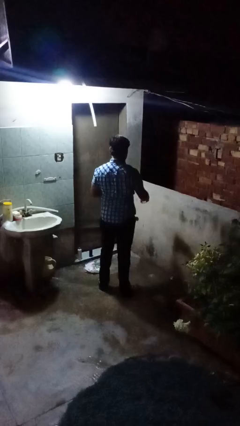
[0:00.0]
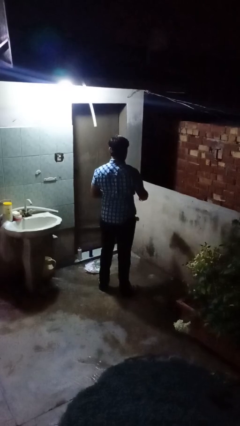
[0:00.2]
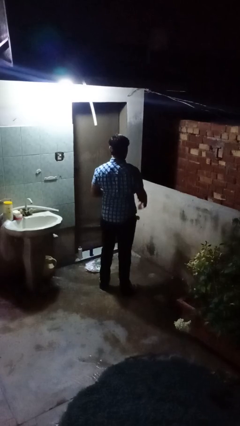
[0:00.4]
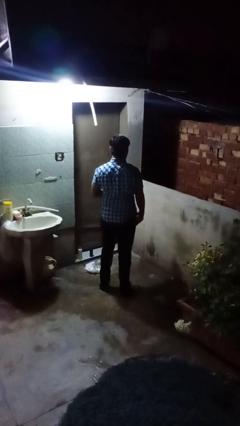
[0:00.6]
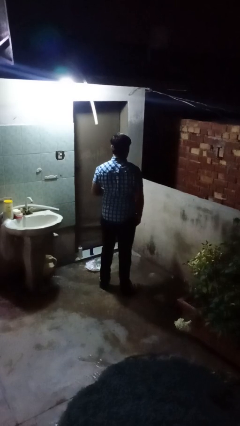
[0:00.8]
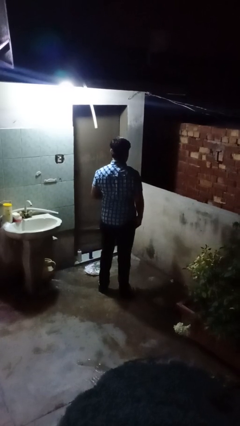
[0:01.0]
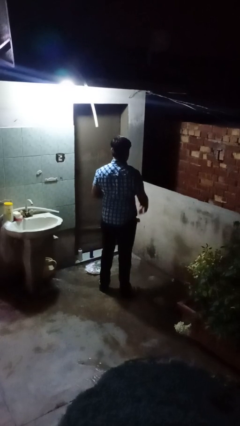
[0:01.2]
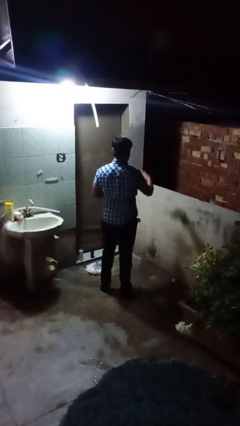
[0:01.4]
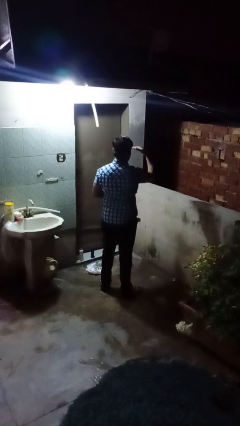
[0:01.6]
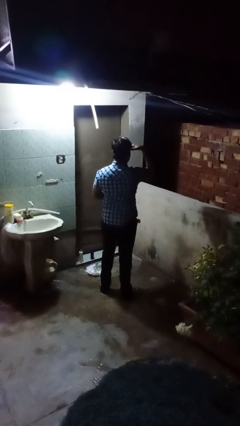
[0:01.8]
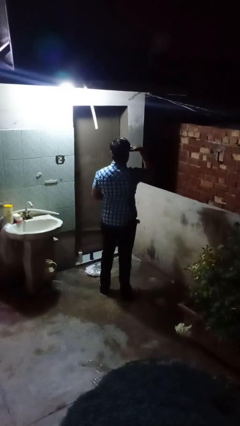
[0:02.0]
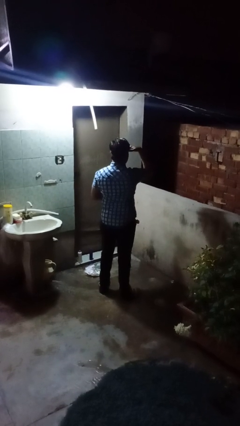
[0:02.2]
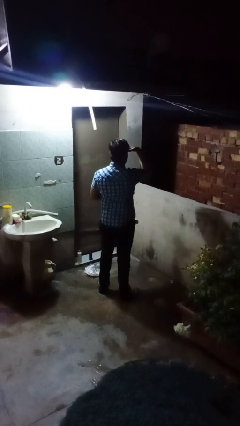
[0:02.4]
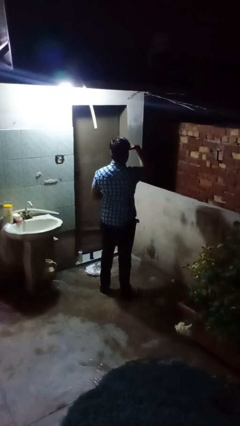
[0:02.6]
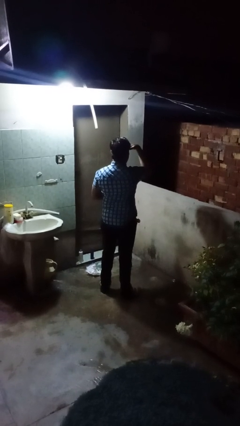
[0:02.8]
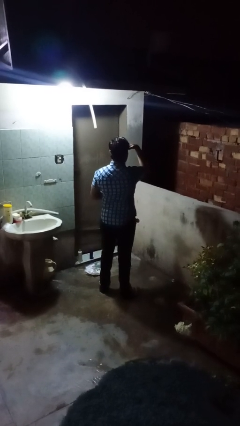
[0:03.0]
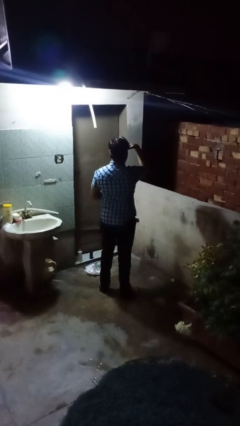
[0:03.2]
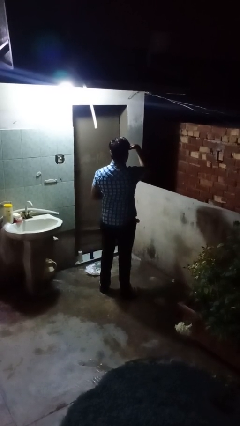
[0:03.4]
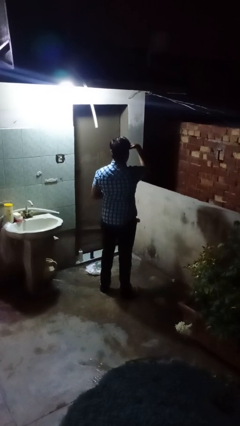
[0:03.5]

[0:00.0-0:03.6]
person shades eyes

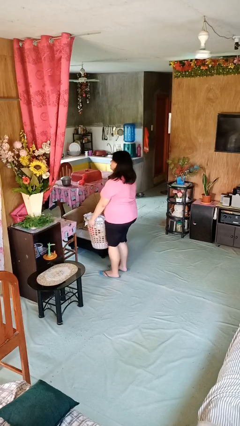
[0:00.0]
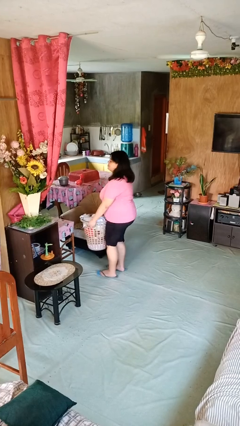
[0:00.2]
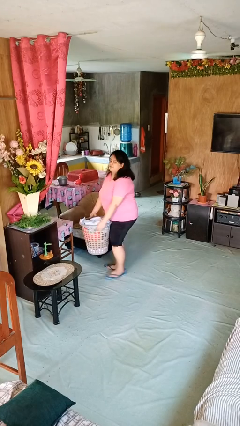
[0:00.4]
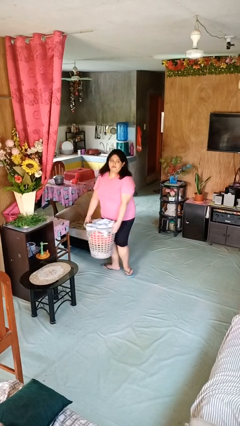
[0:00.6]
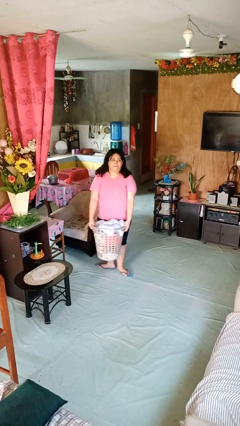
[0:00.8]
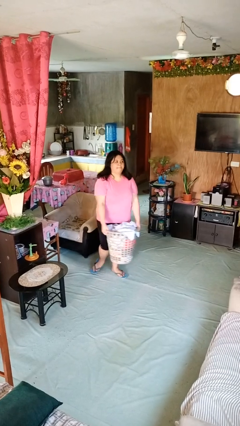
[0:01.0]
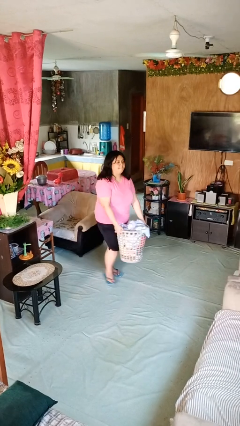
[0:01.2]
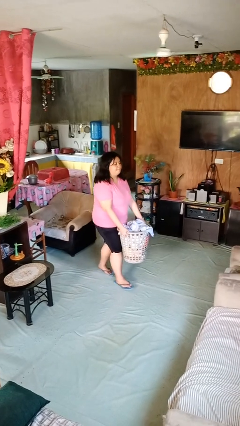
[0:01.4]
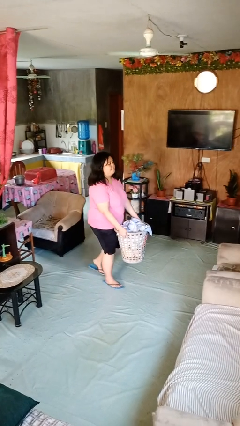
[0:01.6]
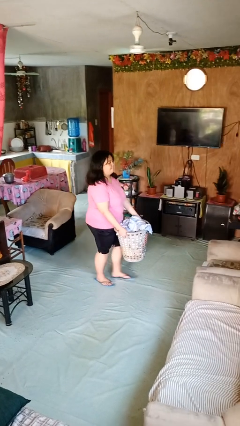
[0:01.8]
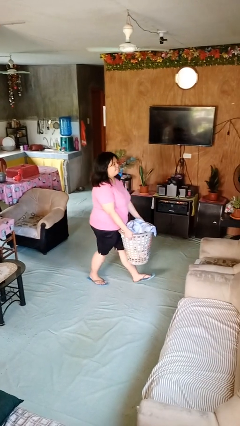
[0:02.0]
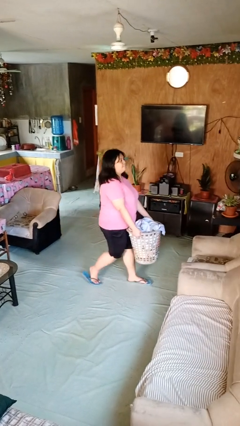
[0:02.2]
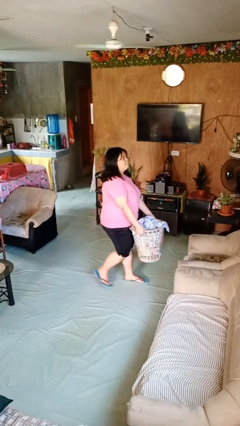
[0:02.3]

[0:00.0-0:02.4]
person carries laundry basket

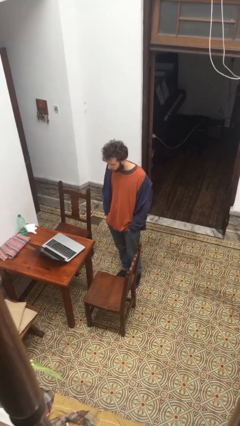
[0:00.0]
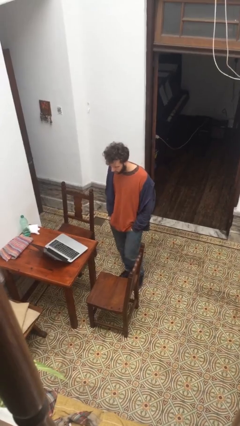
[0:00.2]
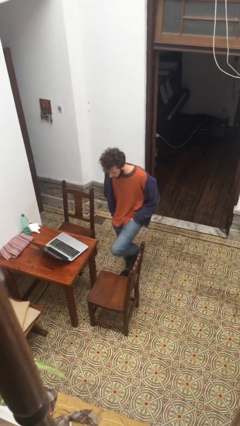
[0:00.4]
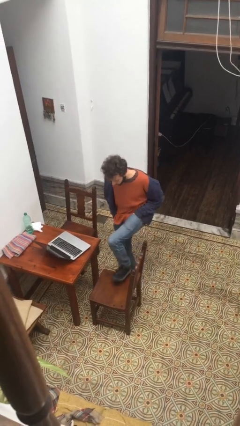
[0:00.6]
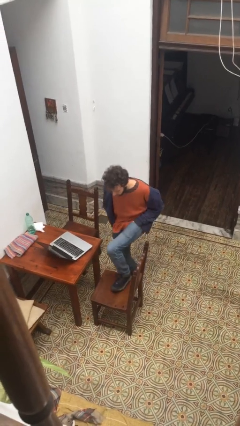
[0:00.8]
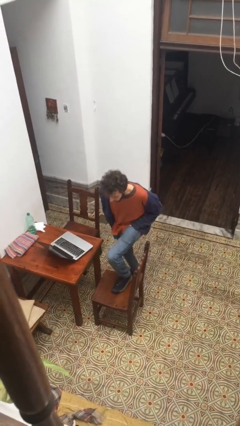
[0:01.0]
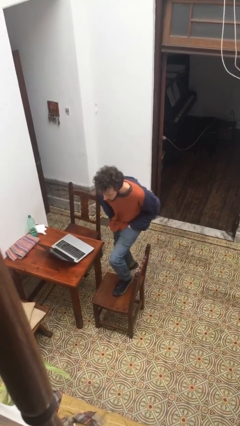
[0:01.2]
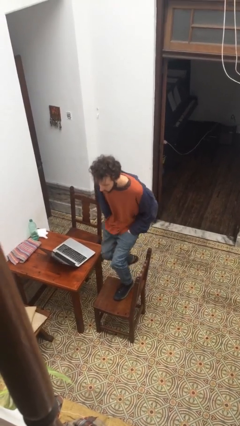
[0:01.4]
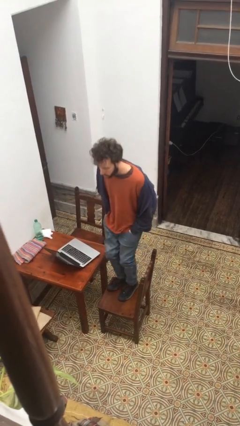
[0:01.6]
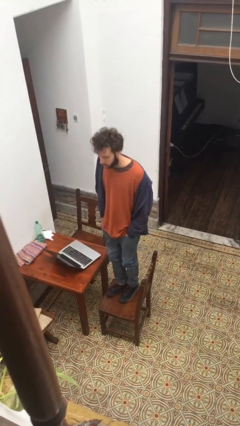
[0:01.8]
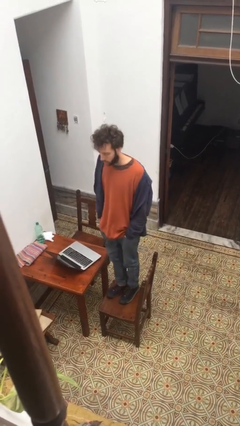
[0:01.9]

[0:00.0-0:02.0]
person climbs on chair

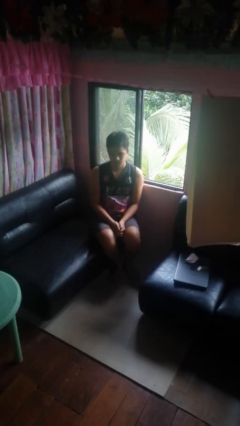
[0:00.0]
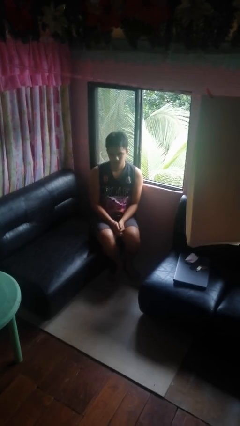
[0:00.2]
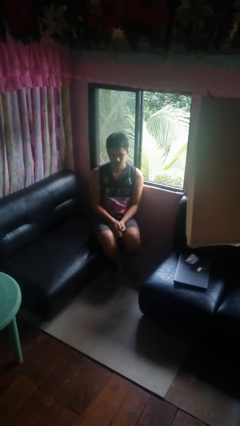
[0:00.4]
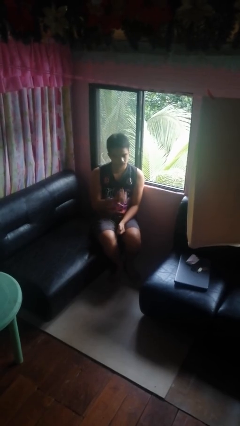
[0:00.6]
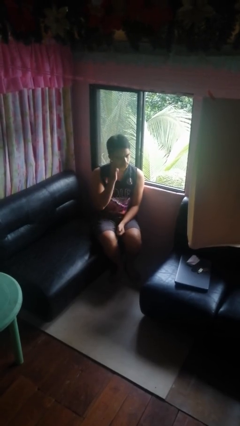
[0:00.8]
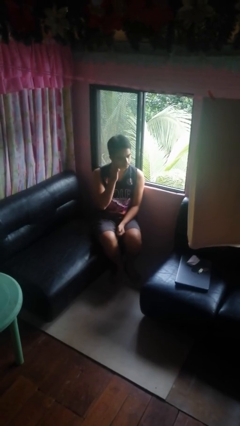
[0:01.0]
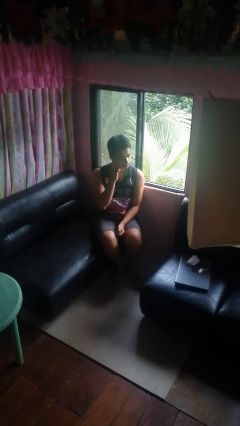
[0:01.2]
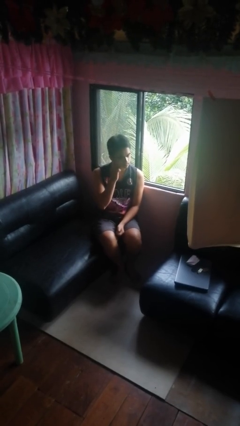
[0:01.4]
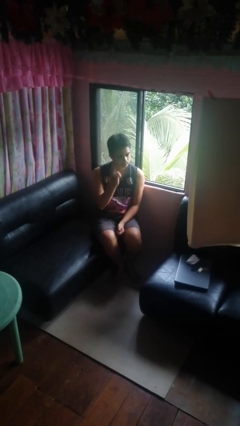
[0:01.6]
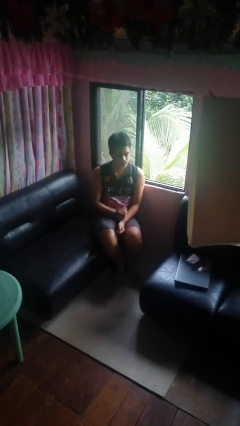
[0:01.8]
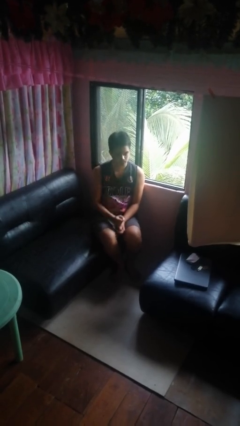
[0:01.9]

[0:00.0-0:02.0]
person gestures listen closely

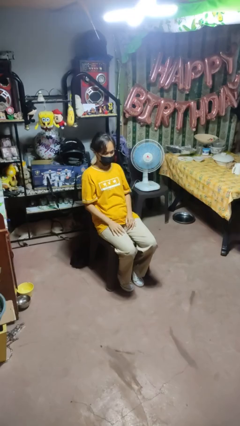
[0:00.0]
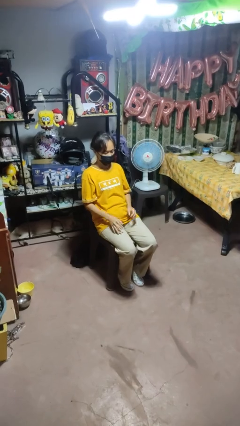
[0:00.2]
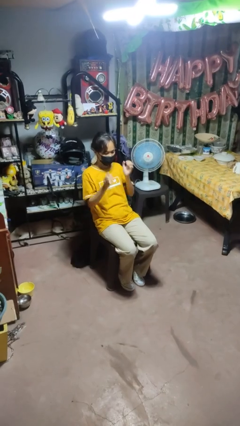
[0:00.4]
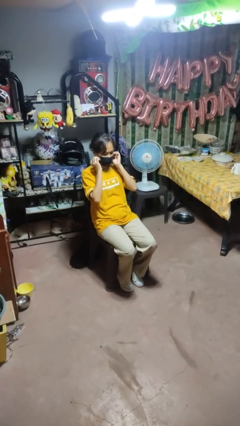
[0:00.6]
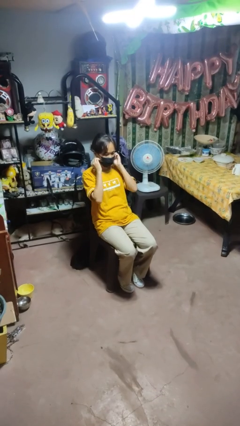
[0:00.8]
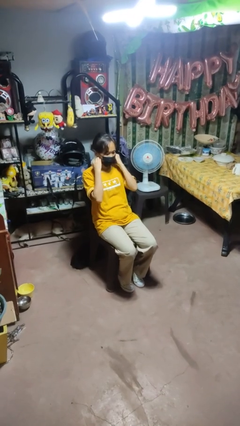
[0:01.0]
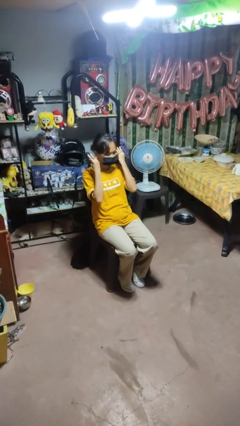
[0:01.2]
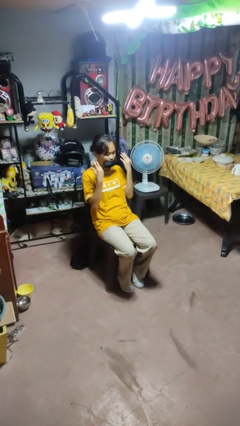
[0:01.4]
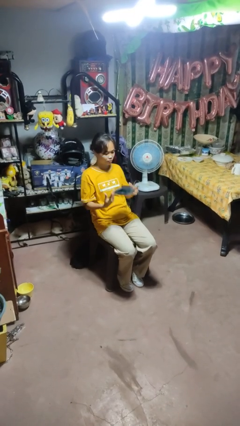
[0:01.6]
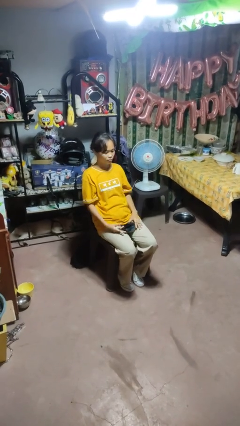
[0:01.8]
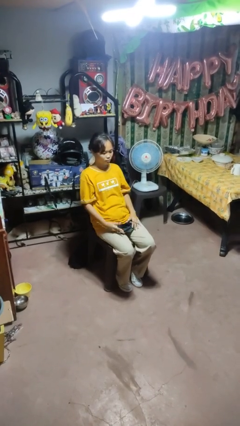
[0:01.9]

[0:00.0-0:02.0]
person takes off facemask

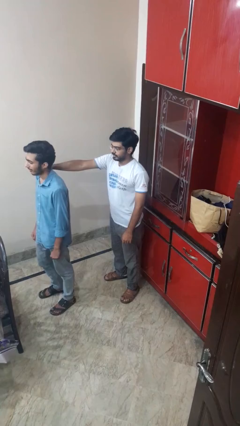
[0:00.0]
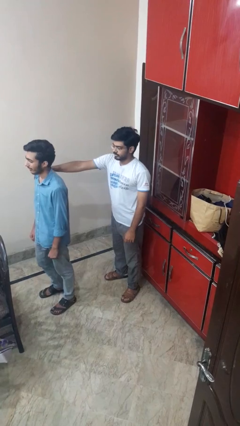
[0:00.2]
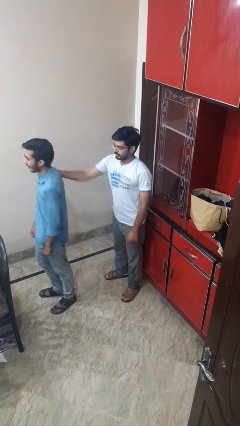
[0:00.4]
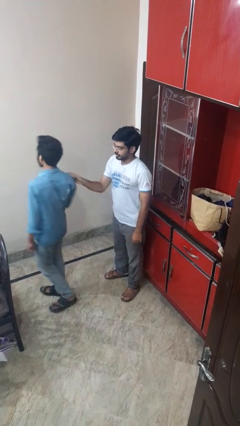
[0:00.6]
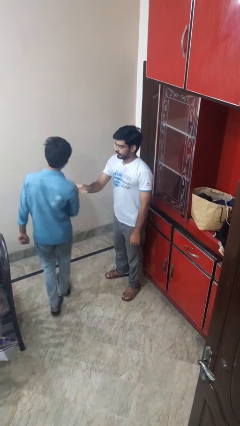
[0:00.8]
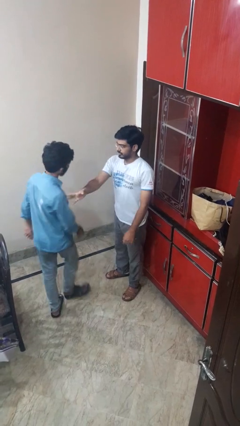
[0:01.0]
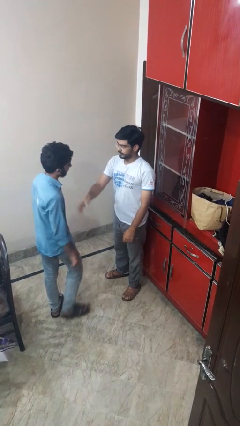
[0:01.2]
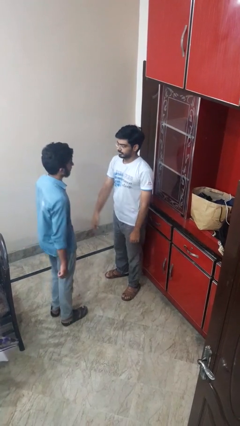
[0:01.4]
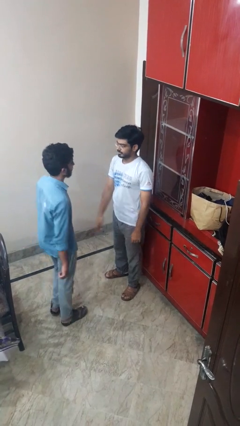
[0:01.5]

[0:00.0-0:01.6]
person spins person around

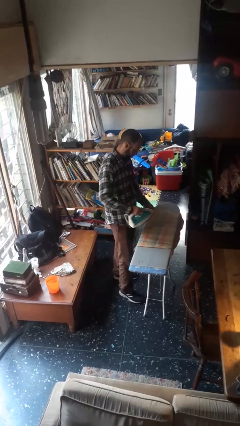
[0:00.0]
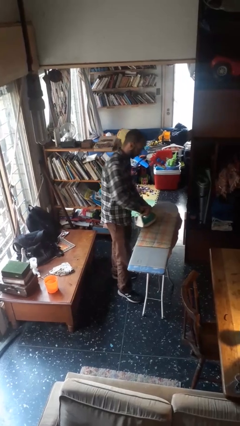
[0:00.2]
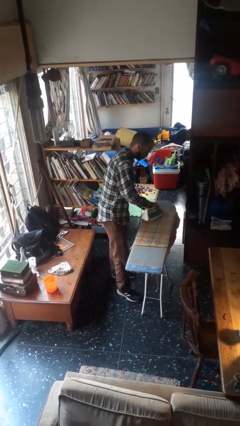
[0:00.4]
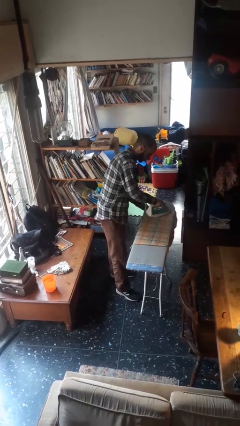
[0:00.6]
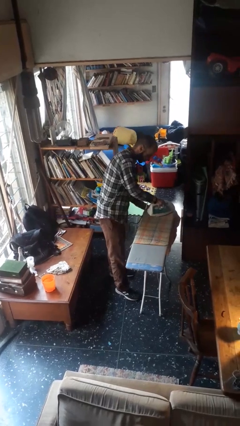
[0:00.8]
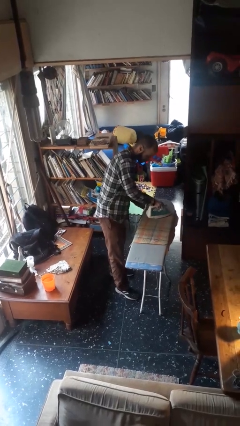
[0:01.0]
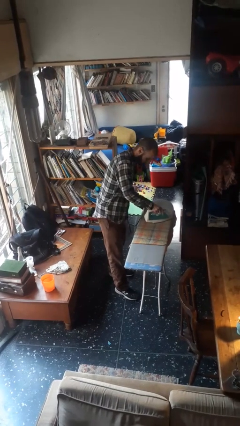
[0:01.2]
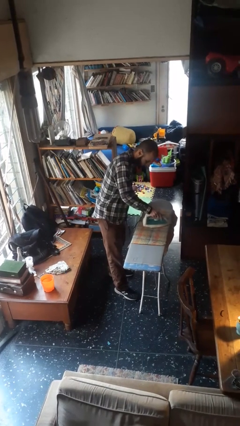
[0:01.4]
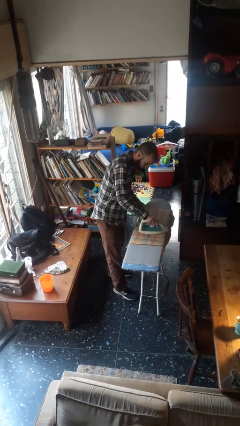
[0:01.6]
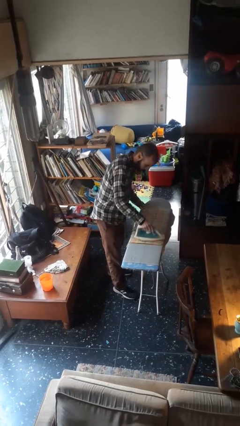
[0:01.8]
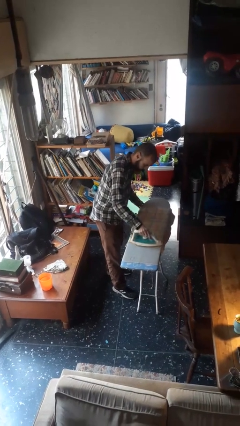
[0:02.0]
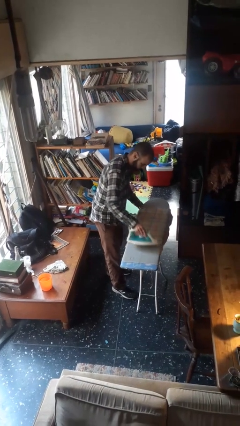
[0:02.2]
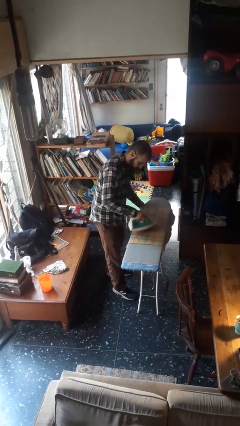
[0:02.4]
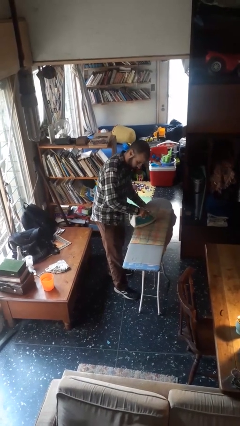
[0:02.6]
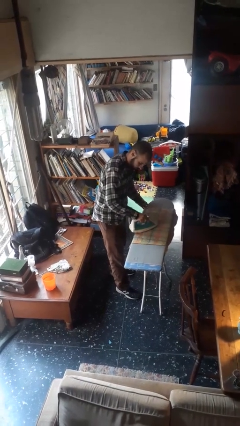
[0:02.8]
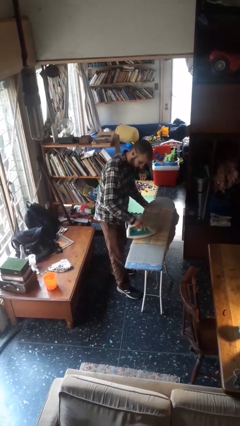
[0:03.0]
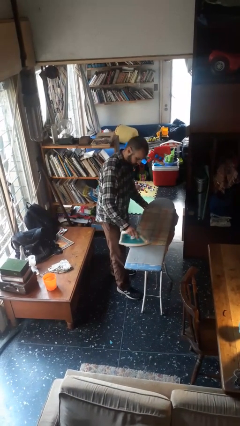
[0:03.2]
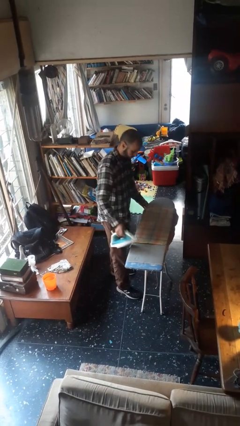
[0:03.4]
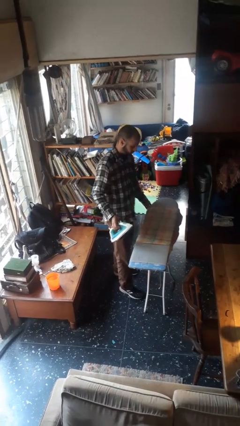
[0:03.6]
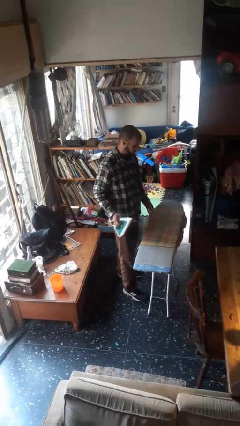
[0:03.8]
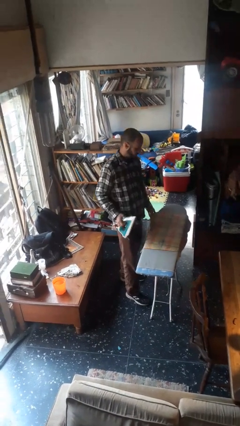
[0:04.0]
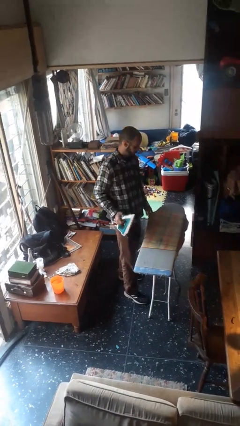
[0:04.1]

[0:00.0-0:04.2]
person irons clothes
